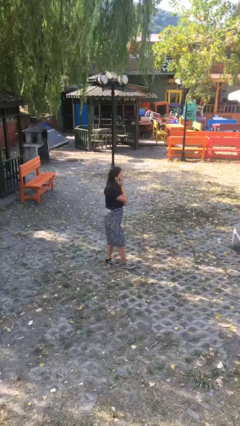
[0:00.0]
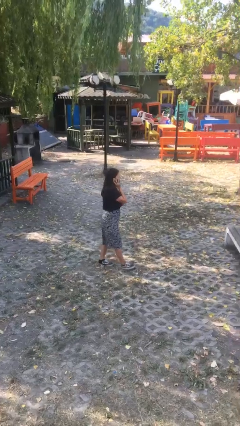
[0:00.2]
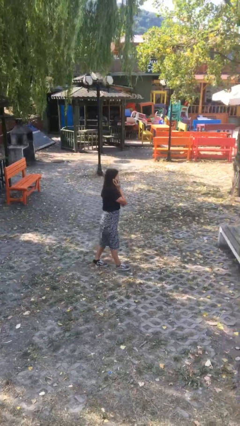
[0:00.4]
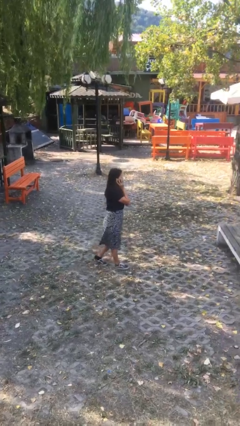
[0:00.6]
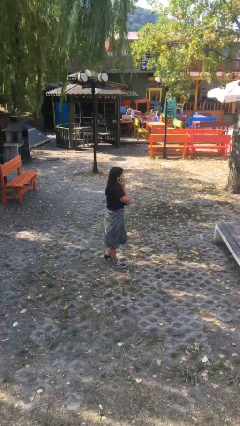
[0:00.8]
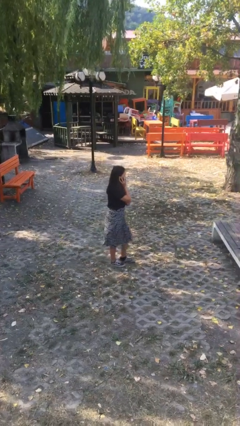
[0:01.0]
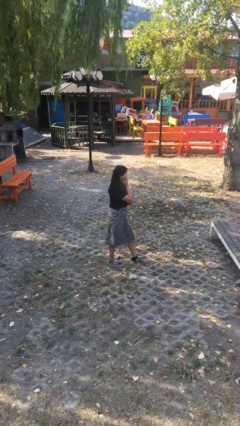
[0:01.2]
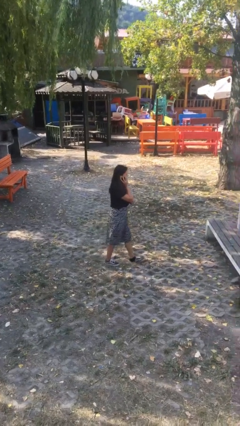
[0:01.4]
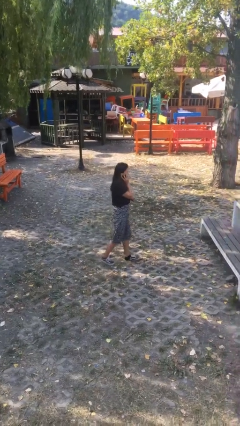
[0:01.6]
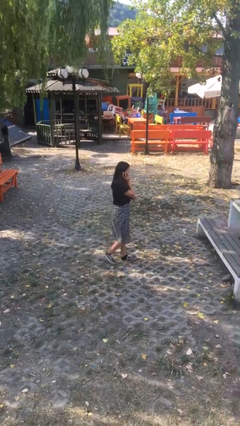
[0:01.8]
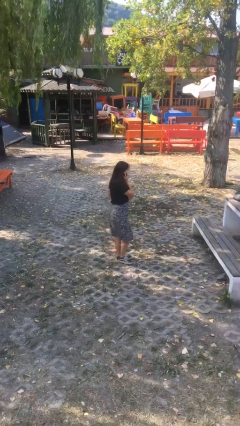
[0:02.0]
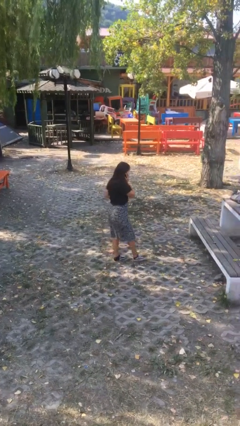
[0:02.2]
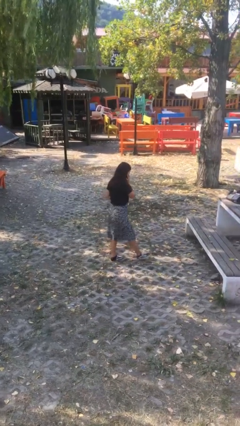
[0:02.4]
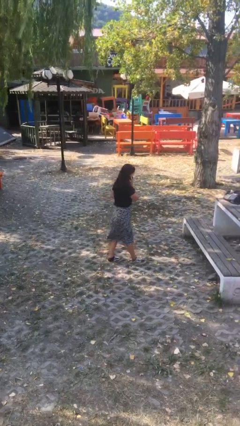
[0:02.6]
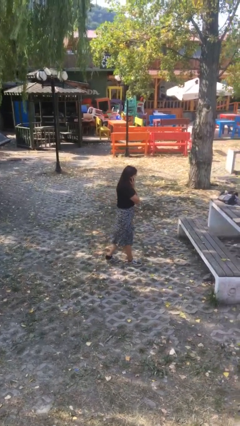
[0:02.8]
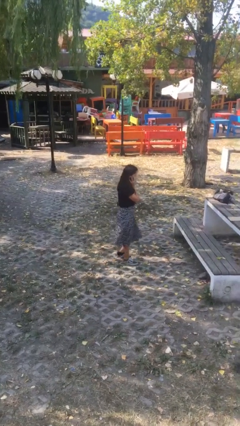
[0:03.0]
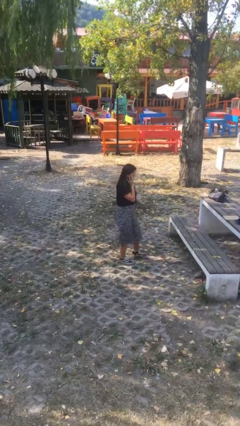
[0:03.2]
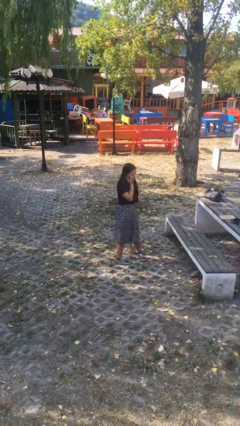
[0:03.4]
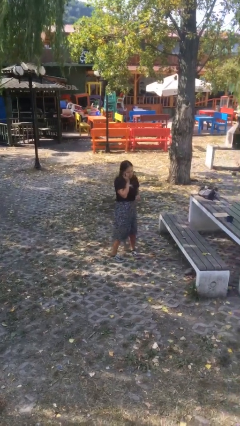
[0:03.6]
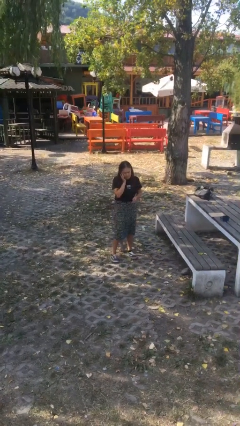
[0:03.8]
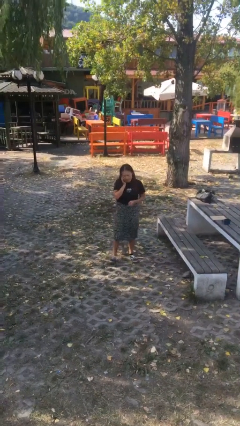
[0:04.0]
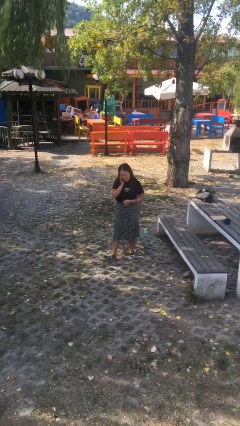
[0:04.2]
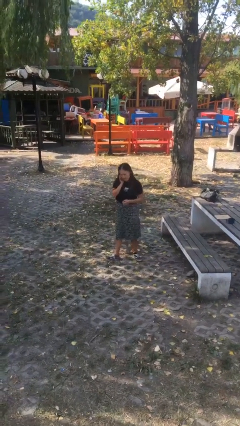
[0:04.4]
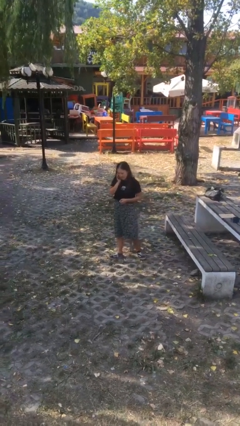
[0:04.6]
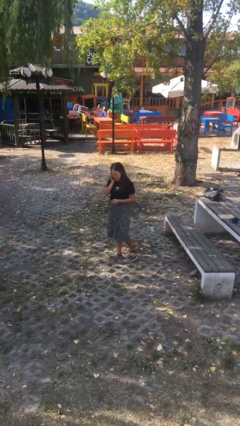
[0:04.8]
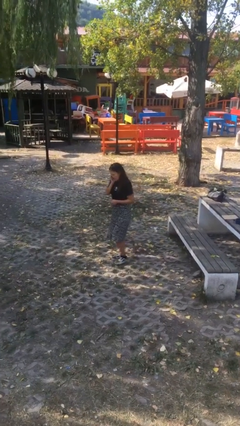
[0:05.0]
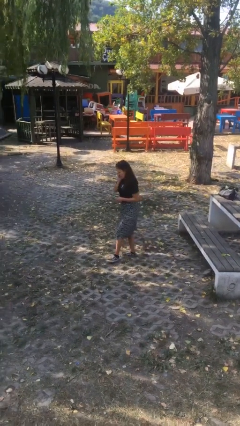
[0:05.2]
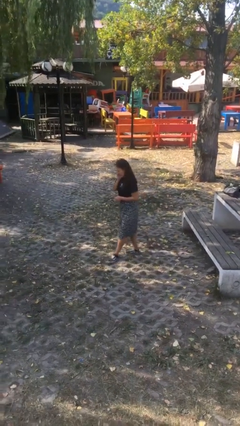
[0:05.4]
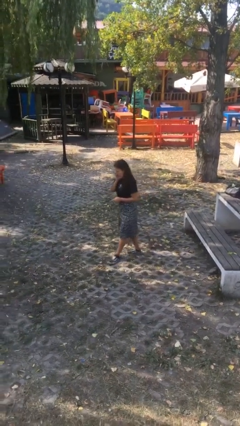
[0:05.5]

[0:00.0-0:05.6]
person talks on phone

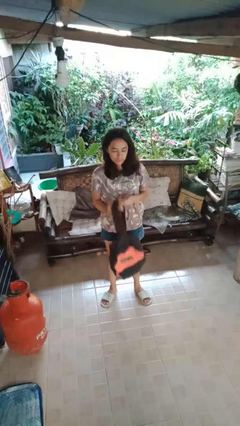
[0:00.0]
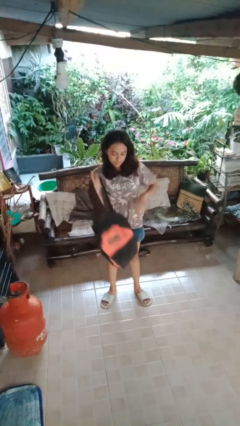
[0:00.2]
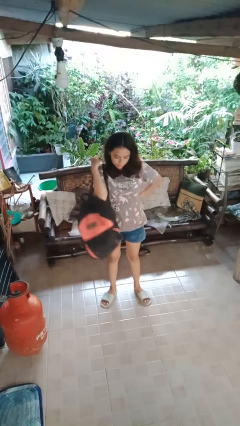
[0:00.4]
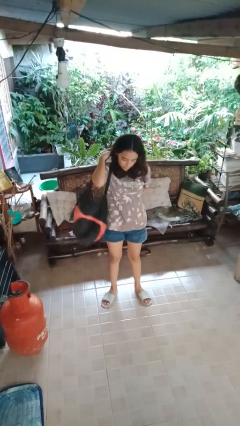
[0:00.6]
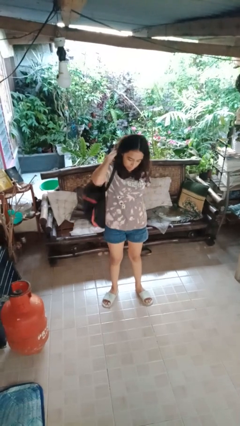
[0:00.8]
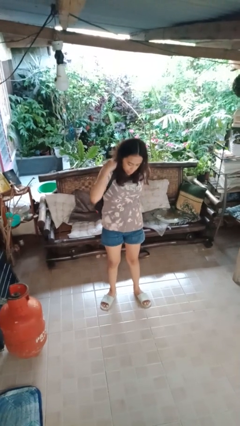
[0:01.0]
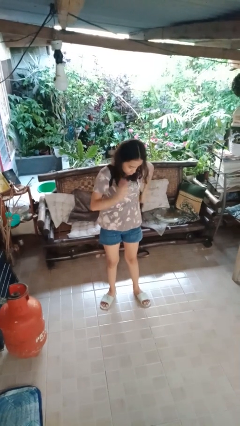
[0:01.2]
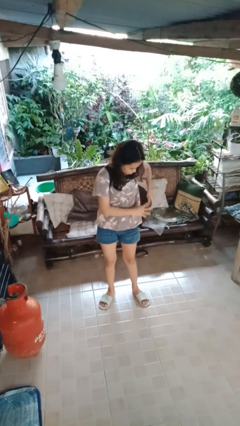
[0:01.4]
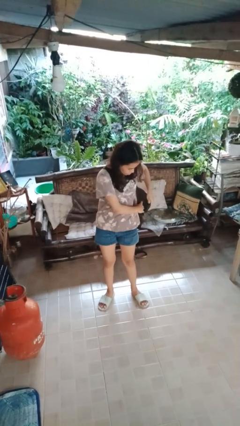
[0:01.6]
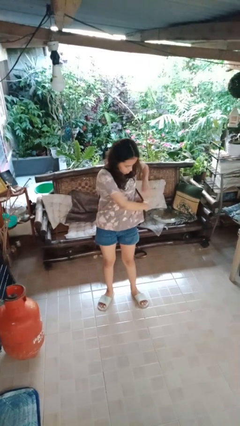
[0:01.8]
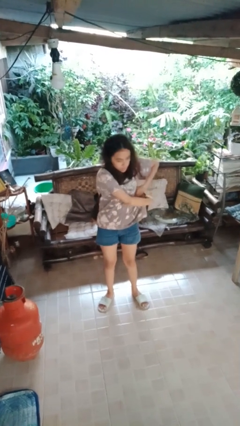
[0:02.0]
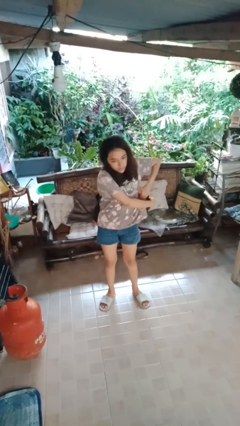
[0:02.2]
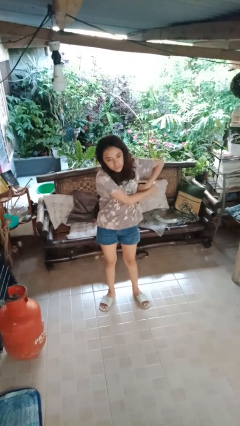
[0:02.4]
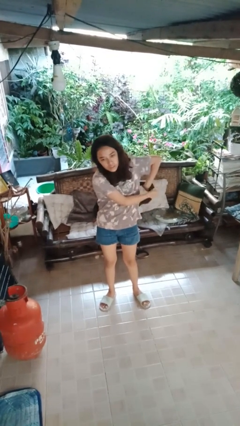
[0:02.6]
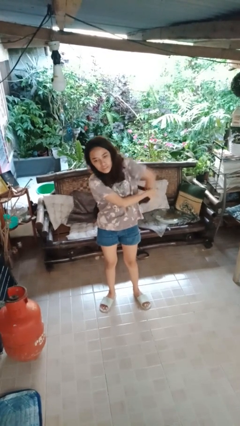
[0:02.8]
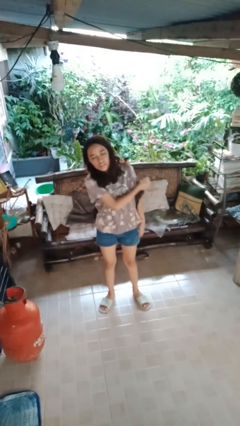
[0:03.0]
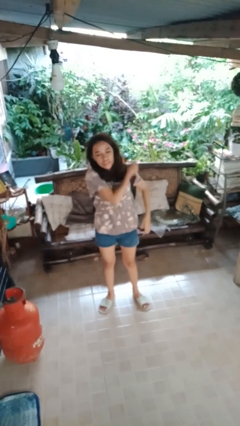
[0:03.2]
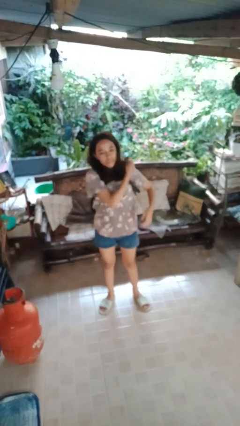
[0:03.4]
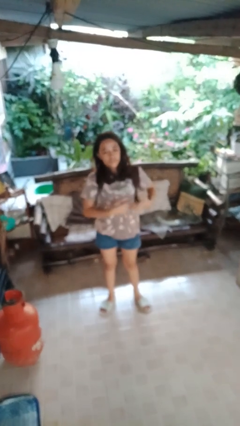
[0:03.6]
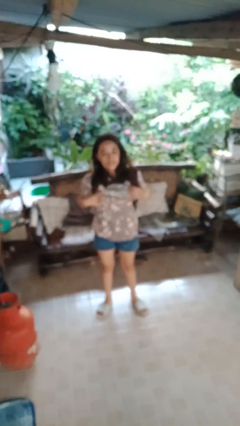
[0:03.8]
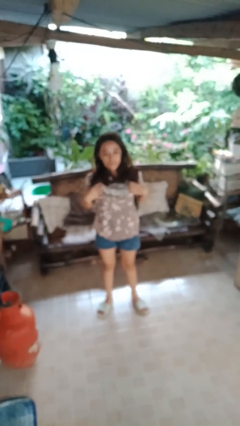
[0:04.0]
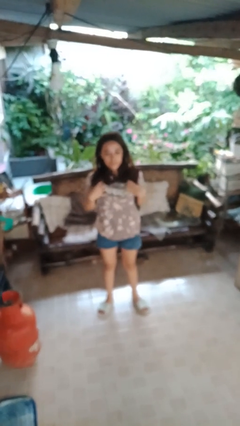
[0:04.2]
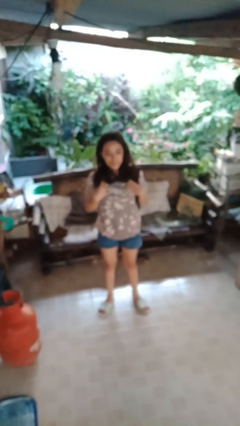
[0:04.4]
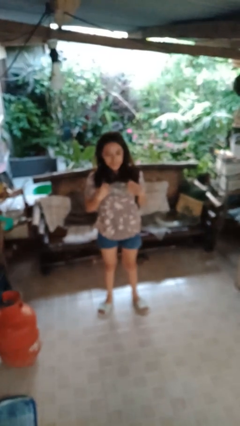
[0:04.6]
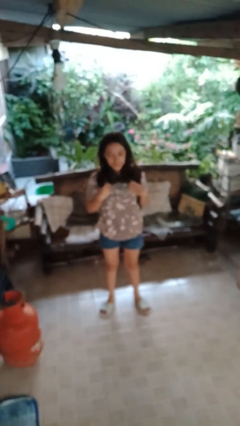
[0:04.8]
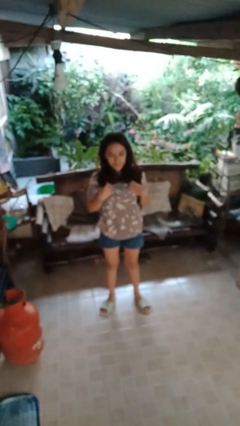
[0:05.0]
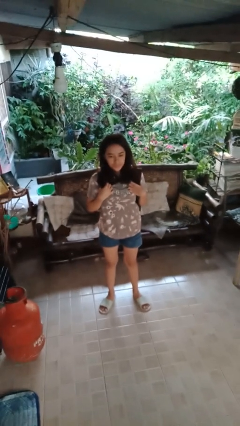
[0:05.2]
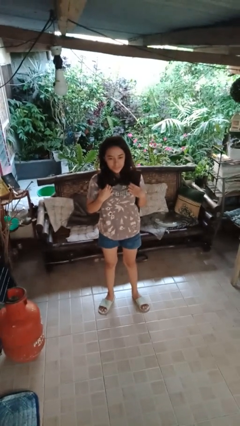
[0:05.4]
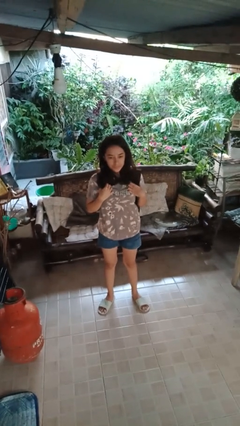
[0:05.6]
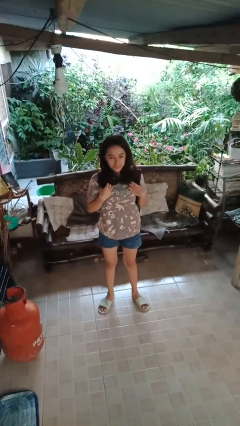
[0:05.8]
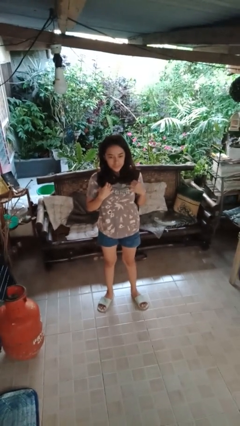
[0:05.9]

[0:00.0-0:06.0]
person puts on backpack

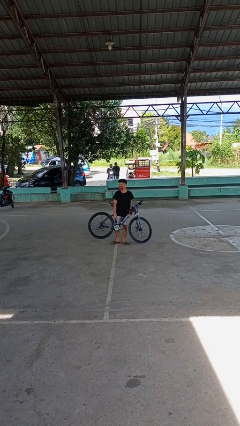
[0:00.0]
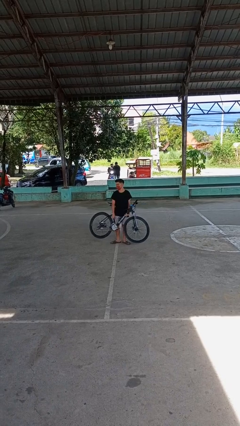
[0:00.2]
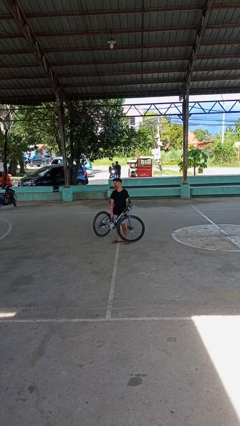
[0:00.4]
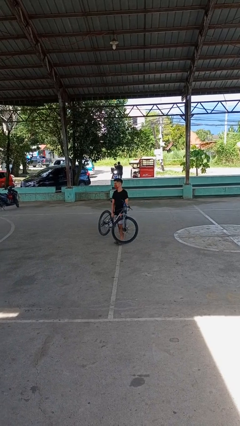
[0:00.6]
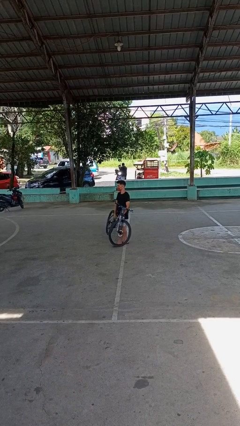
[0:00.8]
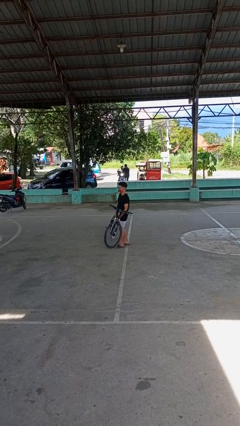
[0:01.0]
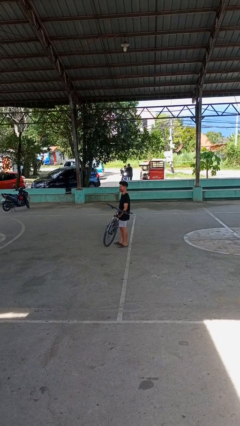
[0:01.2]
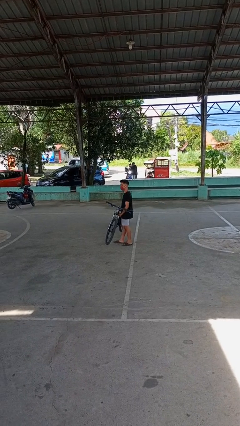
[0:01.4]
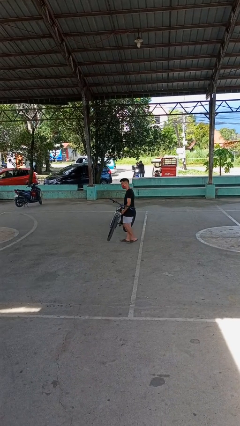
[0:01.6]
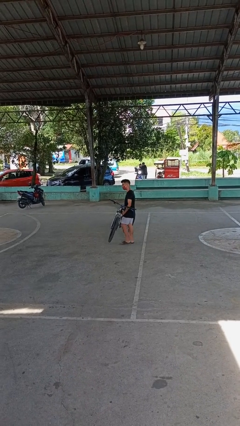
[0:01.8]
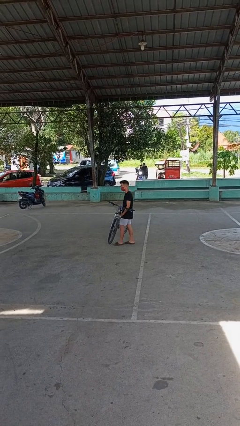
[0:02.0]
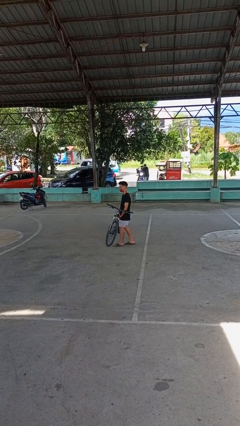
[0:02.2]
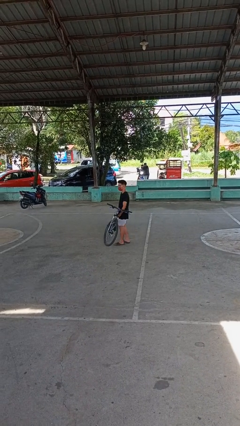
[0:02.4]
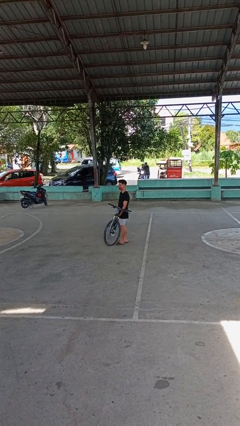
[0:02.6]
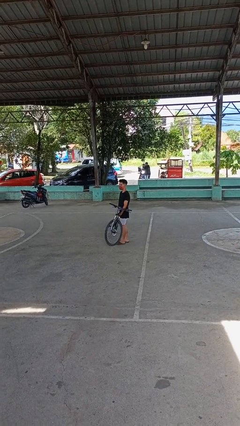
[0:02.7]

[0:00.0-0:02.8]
person carries bicycle

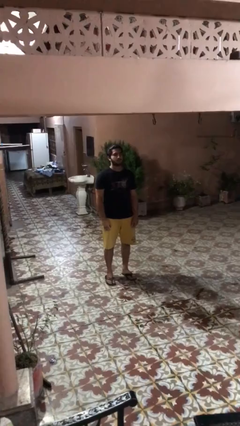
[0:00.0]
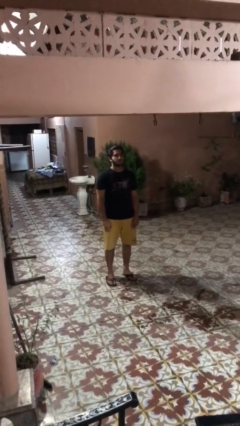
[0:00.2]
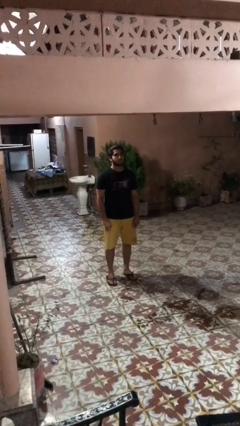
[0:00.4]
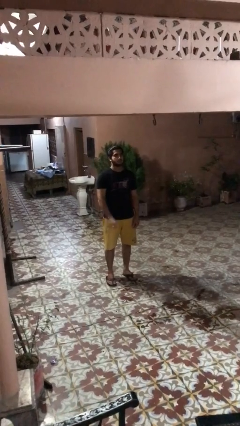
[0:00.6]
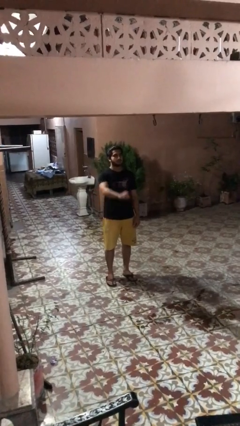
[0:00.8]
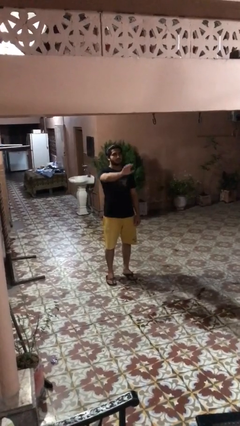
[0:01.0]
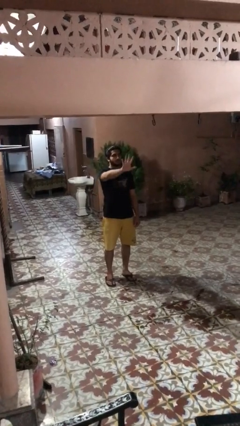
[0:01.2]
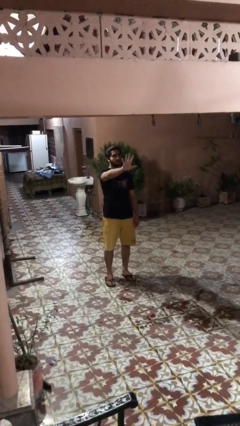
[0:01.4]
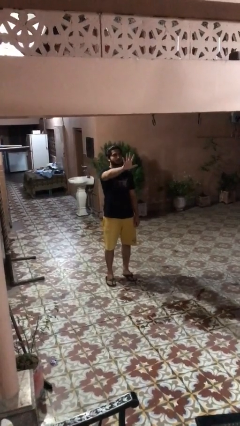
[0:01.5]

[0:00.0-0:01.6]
person gestures number five

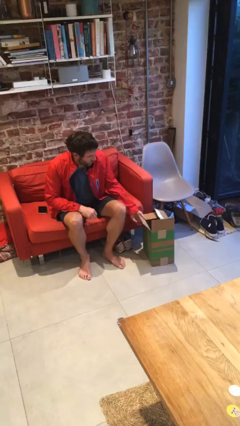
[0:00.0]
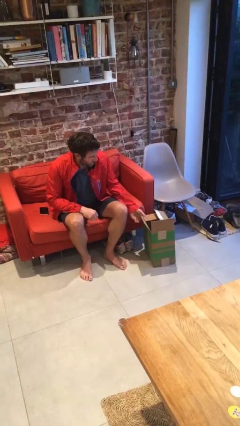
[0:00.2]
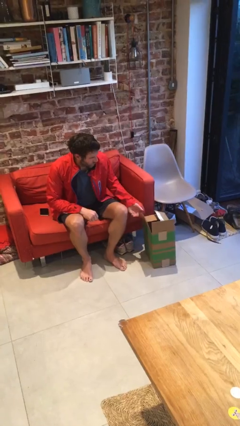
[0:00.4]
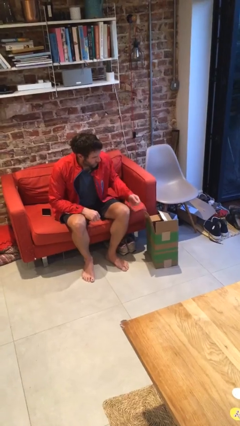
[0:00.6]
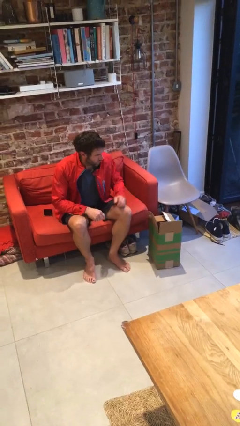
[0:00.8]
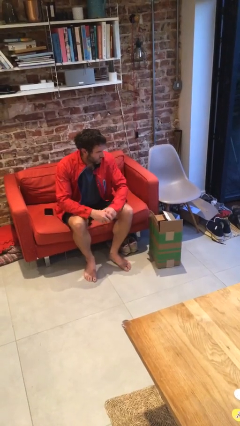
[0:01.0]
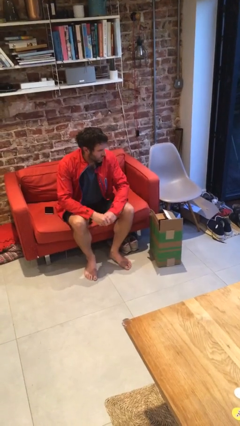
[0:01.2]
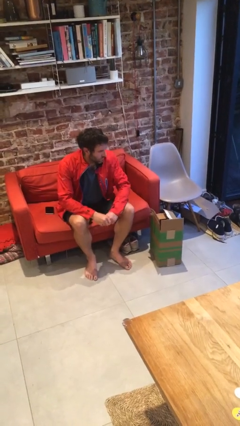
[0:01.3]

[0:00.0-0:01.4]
person puts down object on floor

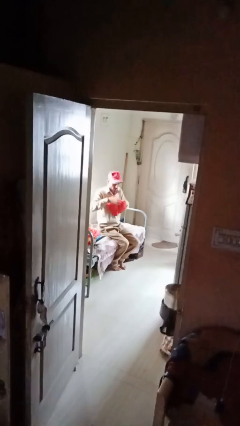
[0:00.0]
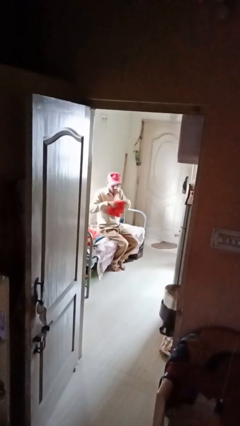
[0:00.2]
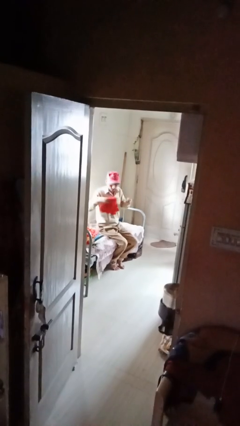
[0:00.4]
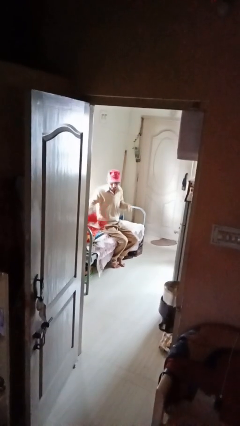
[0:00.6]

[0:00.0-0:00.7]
person folds shirt
